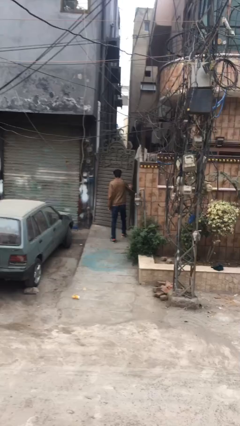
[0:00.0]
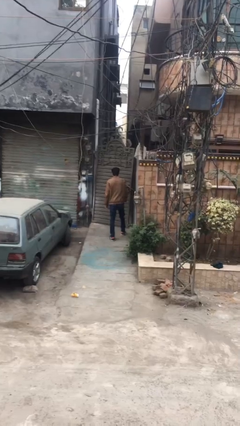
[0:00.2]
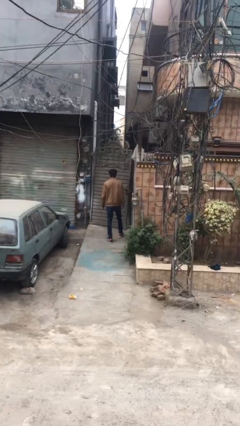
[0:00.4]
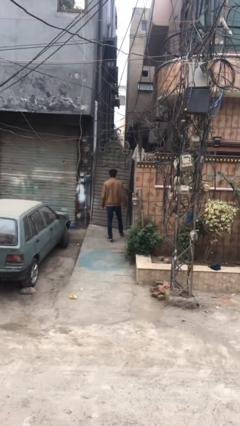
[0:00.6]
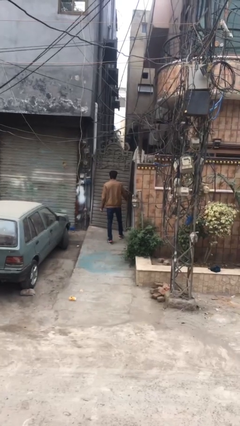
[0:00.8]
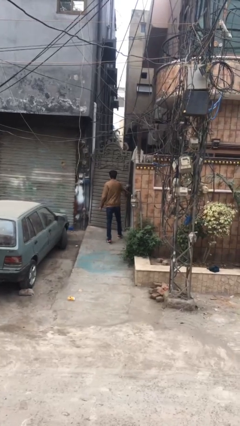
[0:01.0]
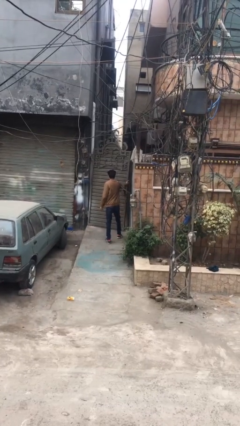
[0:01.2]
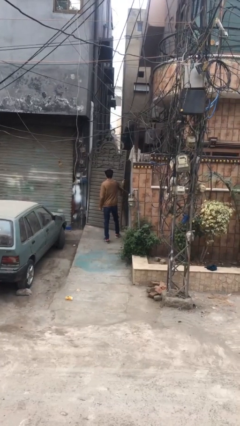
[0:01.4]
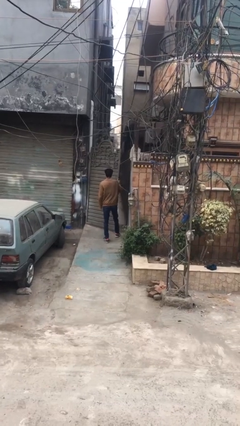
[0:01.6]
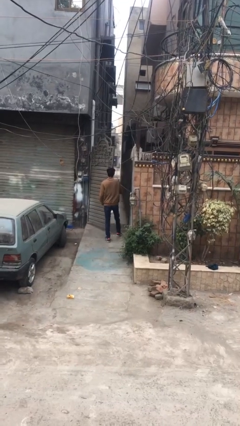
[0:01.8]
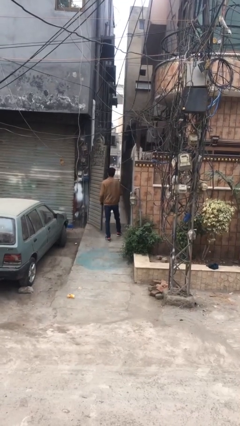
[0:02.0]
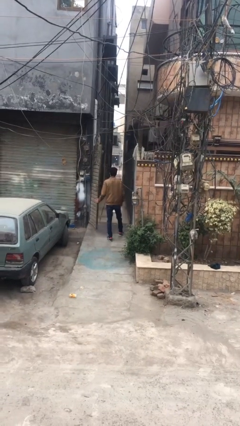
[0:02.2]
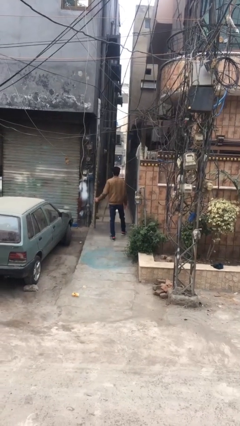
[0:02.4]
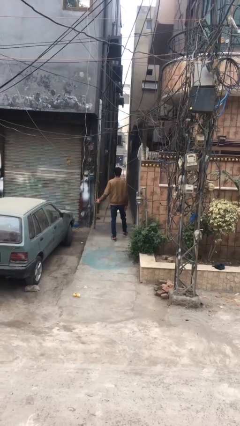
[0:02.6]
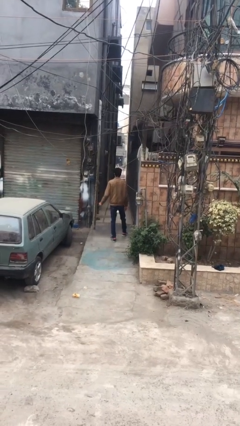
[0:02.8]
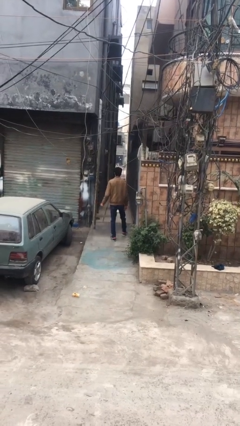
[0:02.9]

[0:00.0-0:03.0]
person opens facility door

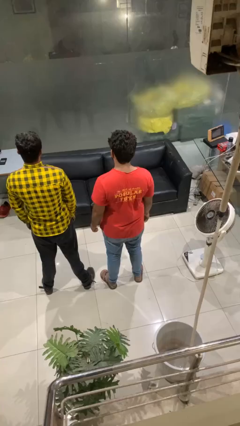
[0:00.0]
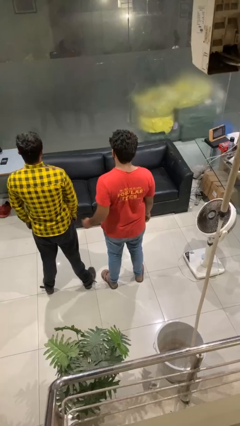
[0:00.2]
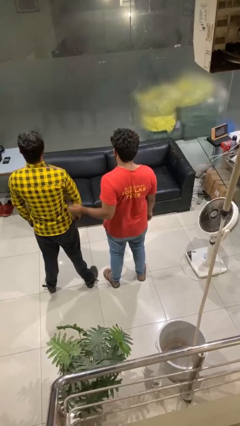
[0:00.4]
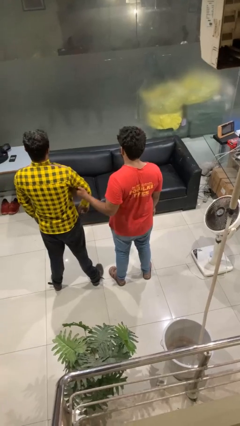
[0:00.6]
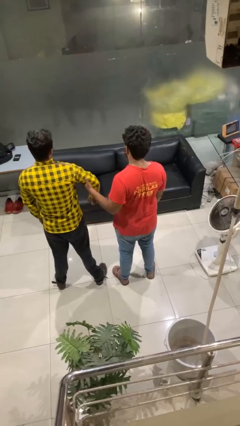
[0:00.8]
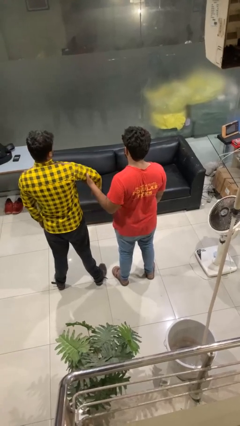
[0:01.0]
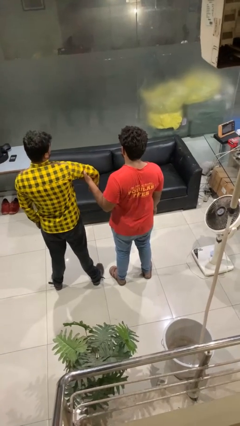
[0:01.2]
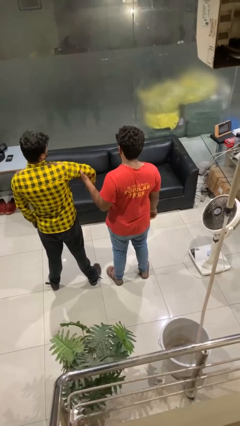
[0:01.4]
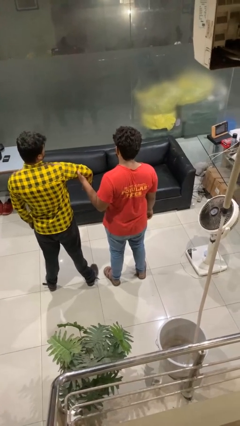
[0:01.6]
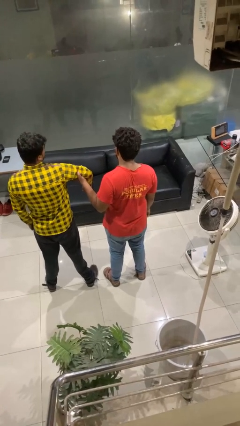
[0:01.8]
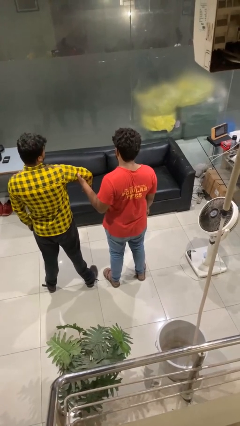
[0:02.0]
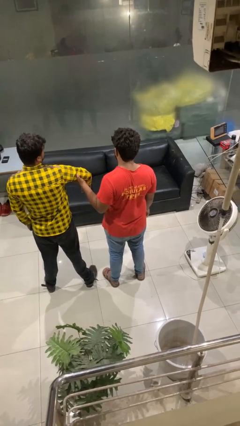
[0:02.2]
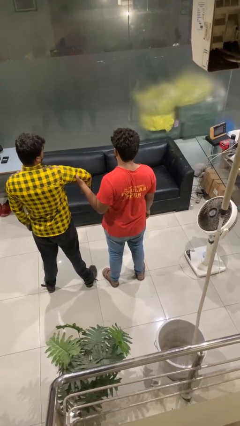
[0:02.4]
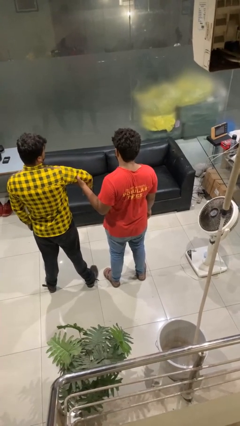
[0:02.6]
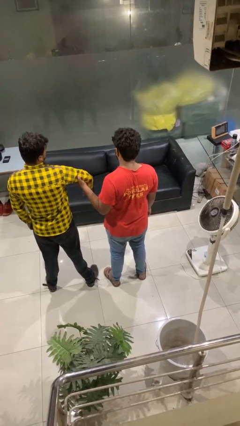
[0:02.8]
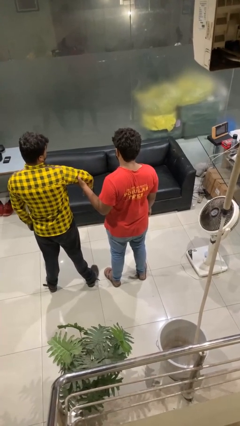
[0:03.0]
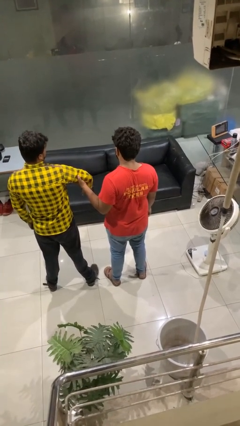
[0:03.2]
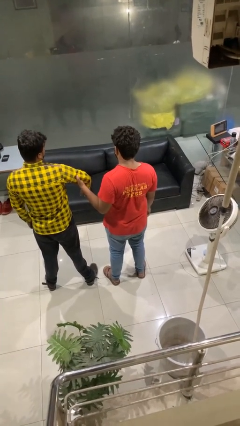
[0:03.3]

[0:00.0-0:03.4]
person grabs person by bicep

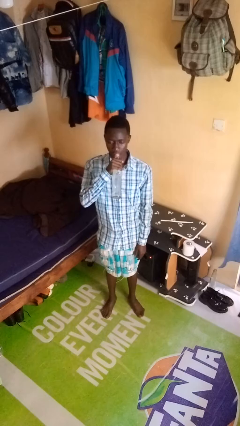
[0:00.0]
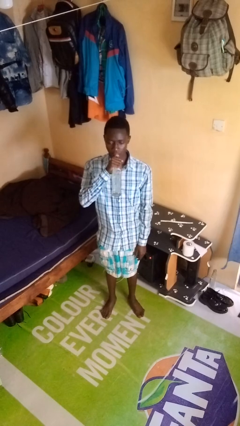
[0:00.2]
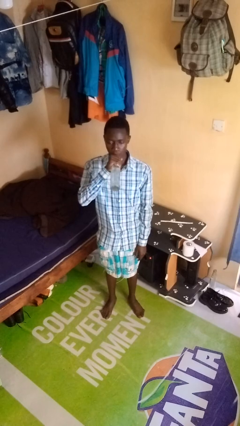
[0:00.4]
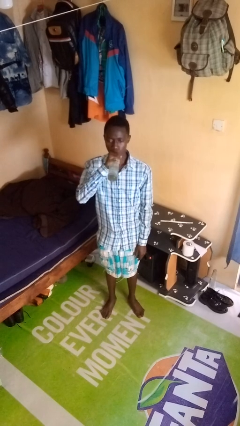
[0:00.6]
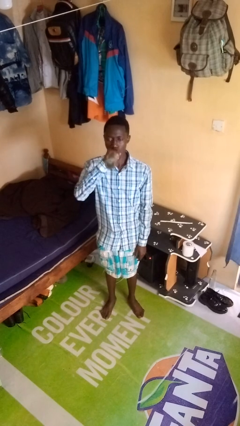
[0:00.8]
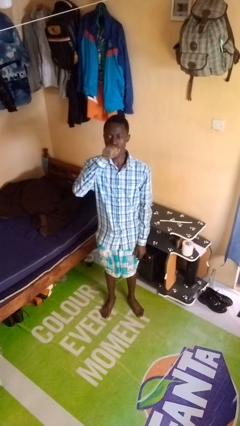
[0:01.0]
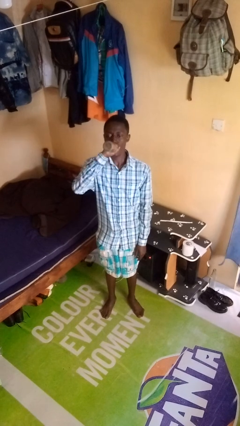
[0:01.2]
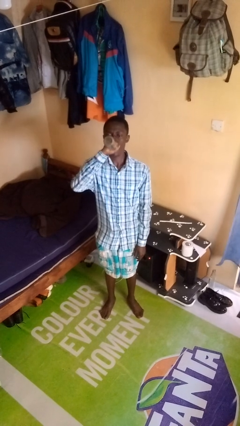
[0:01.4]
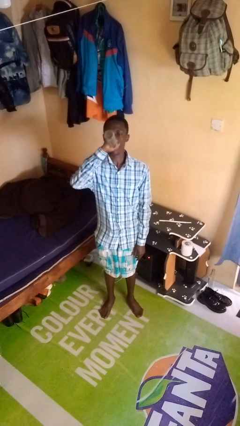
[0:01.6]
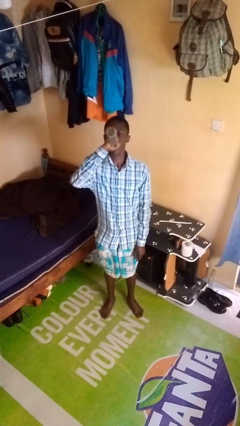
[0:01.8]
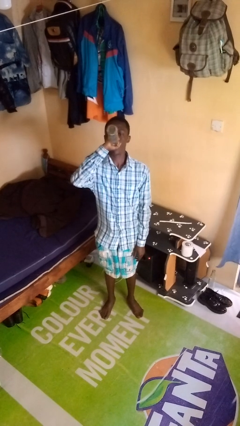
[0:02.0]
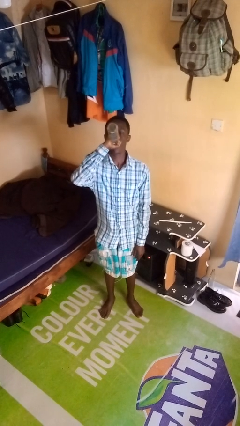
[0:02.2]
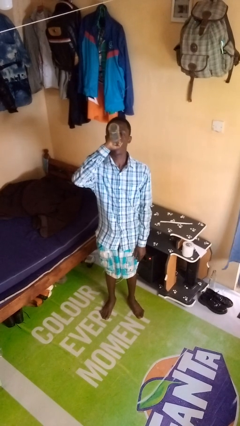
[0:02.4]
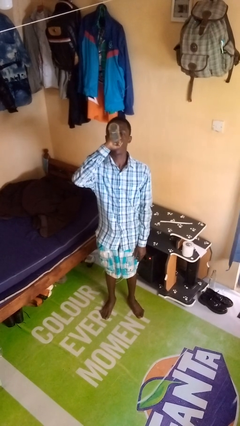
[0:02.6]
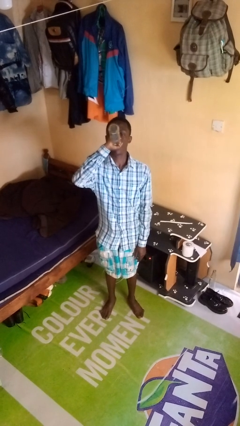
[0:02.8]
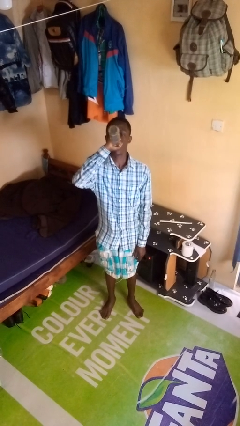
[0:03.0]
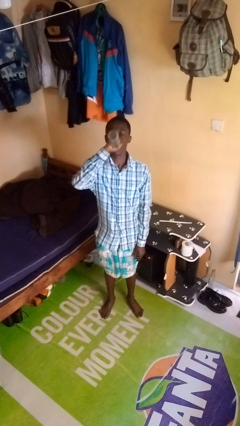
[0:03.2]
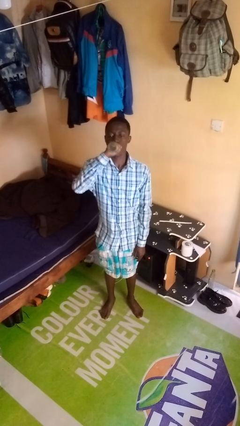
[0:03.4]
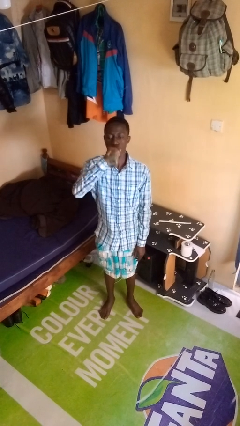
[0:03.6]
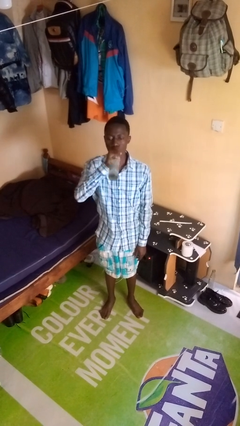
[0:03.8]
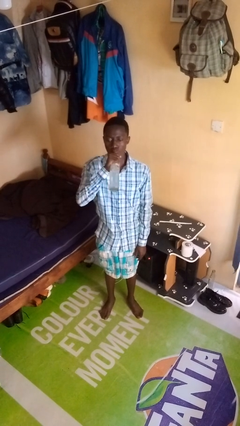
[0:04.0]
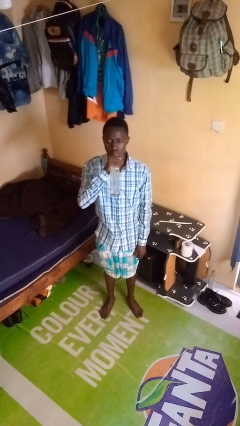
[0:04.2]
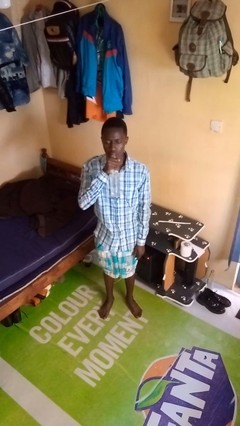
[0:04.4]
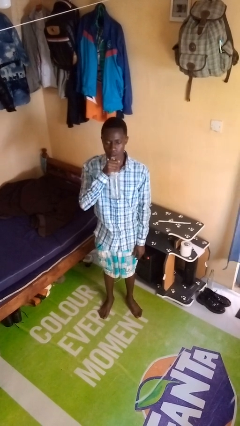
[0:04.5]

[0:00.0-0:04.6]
person drinks from bottle

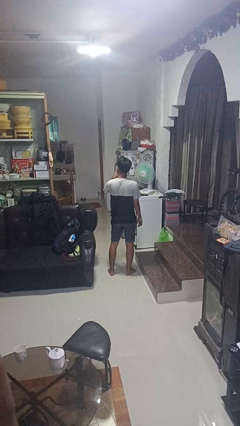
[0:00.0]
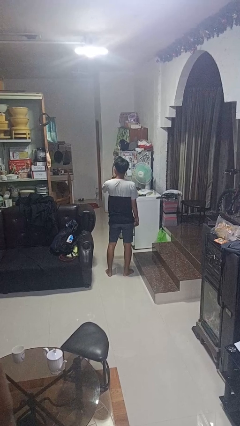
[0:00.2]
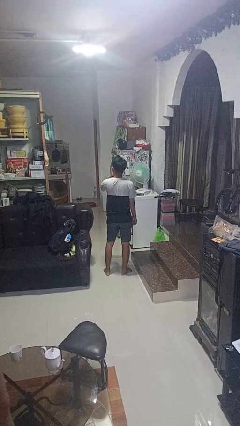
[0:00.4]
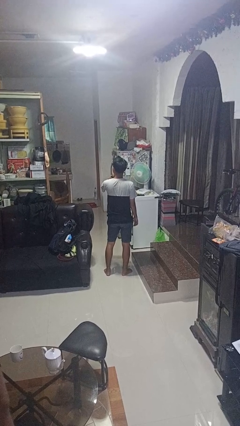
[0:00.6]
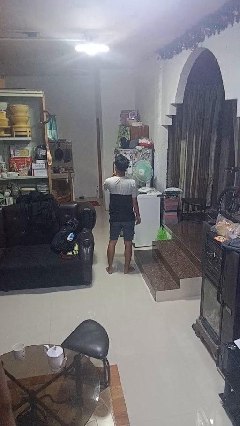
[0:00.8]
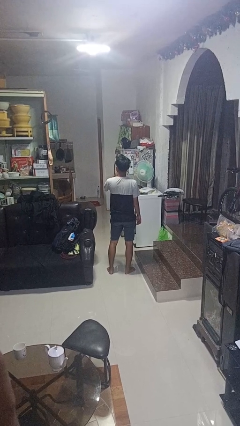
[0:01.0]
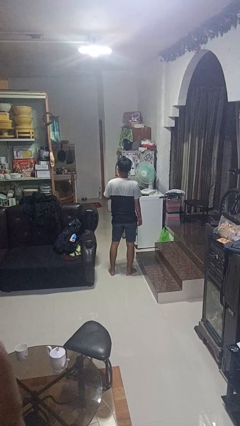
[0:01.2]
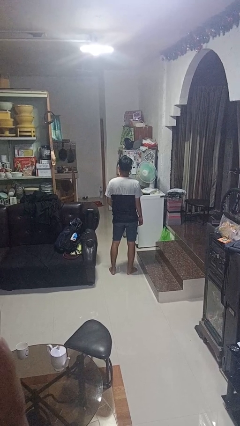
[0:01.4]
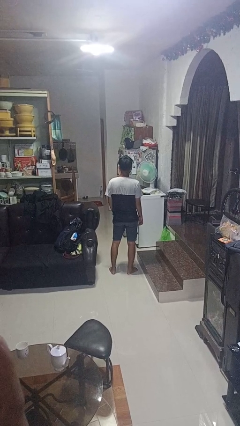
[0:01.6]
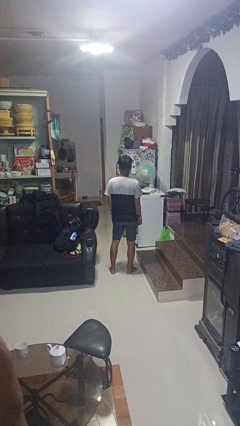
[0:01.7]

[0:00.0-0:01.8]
person gestures be quiet

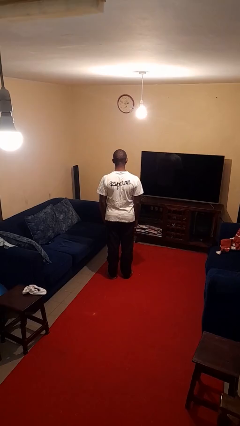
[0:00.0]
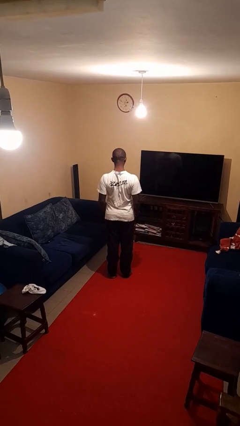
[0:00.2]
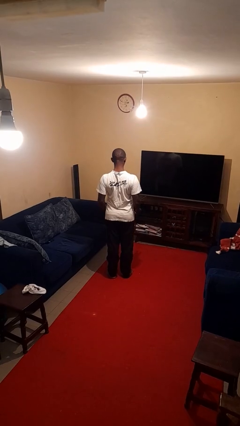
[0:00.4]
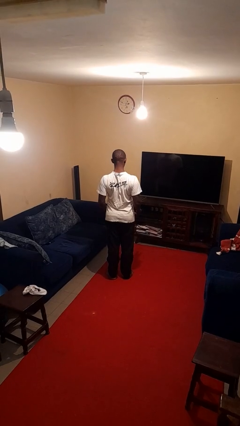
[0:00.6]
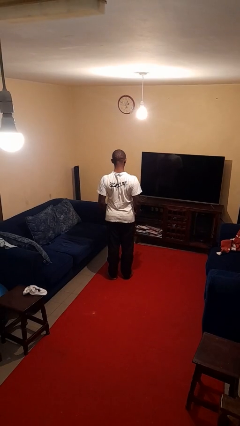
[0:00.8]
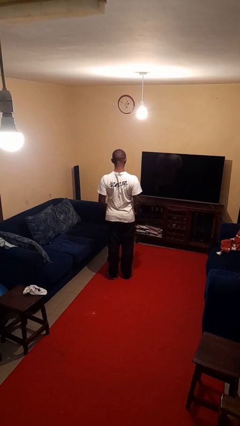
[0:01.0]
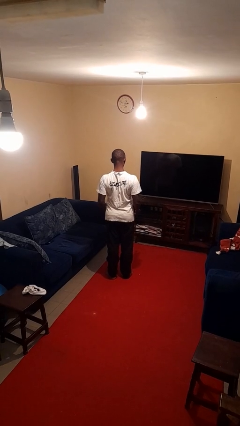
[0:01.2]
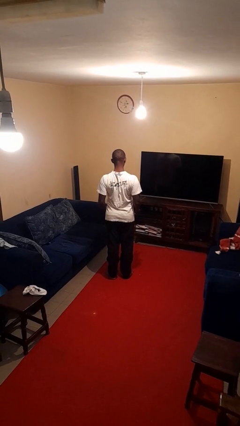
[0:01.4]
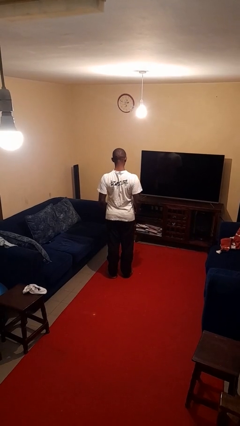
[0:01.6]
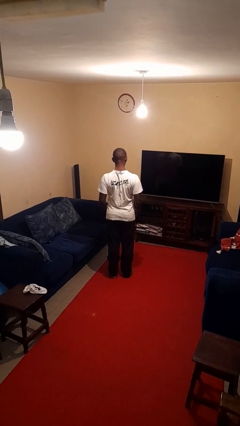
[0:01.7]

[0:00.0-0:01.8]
person shrugs

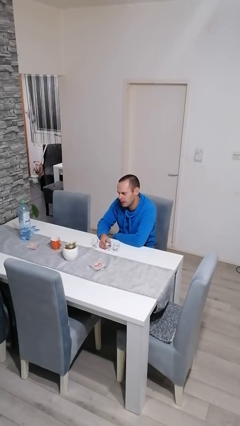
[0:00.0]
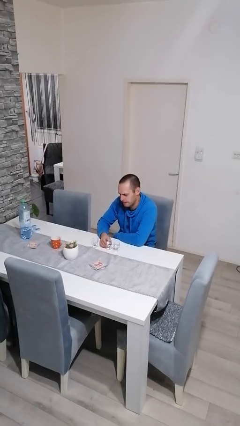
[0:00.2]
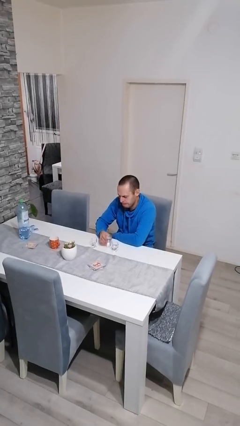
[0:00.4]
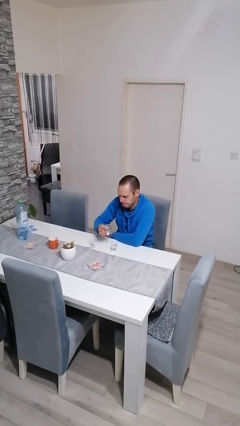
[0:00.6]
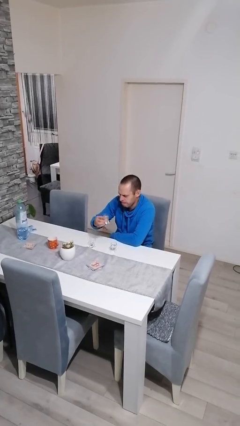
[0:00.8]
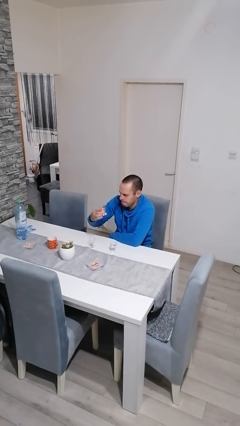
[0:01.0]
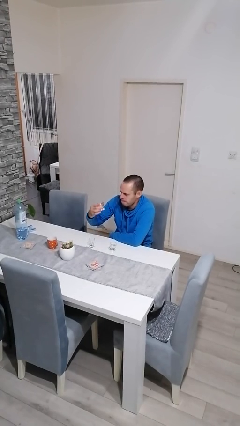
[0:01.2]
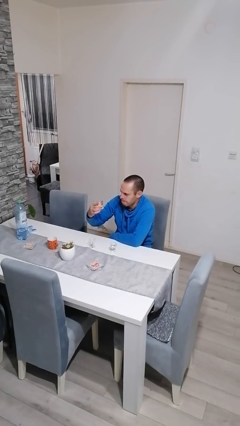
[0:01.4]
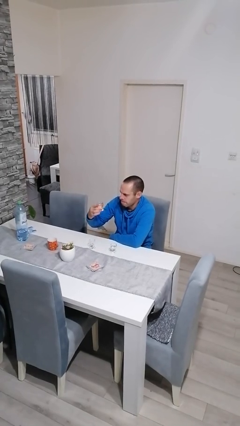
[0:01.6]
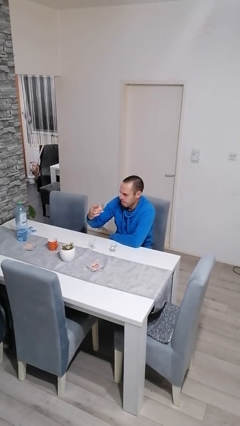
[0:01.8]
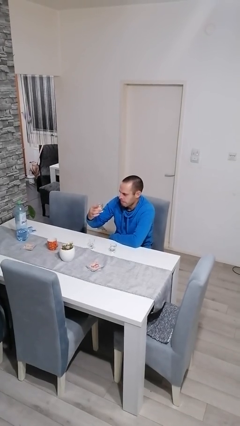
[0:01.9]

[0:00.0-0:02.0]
person picks up object from table

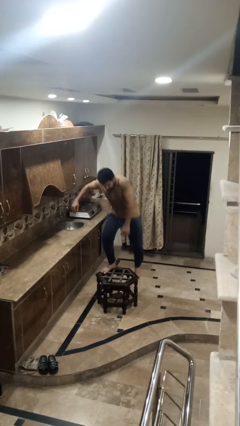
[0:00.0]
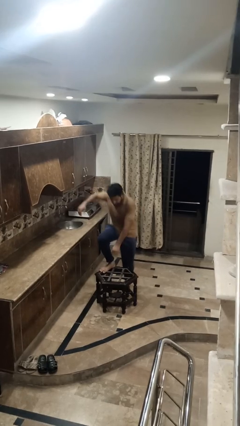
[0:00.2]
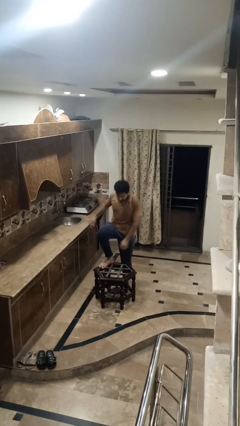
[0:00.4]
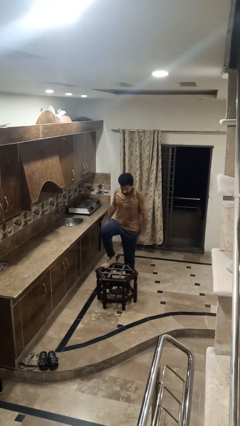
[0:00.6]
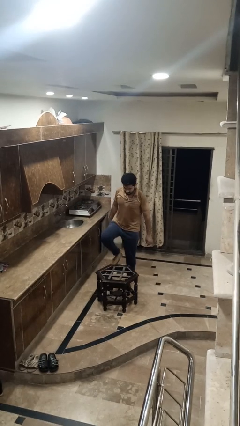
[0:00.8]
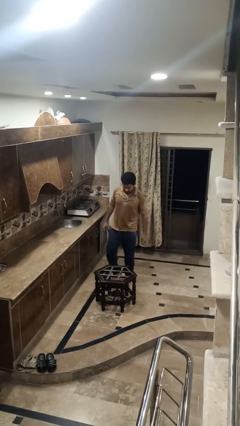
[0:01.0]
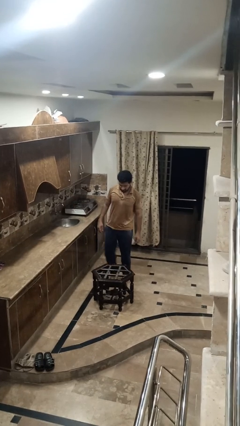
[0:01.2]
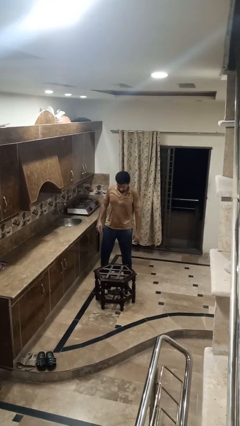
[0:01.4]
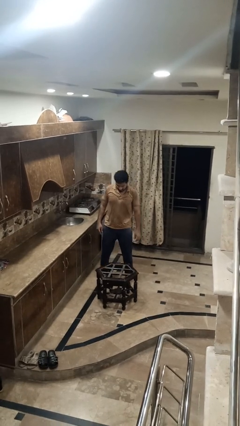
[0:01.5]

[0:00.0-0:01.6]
person climbs off table
